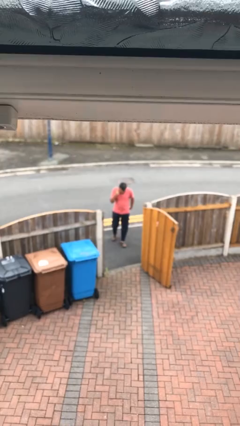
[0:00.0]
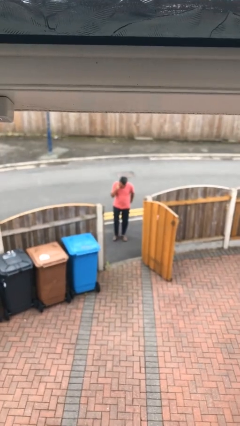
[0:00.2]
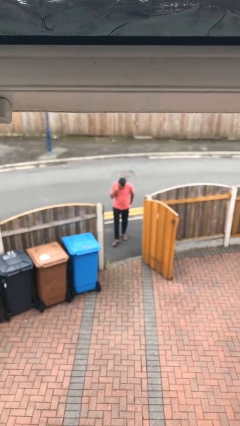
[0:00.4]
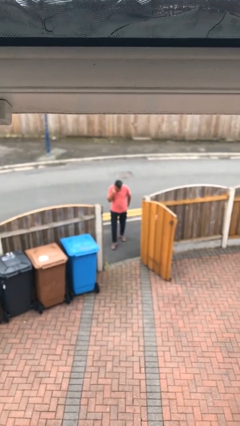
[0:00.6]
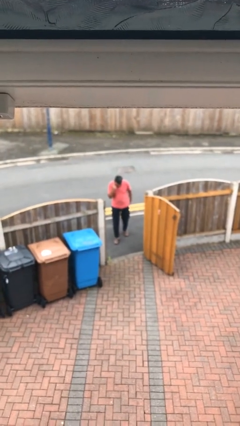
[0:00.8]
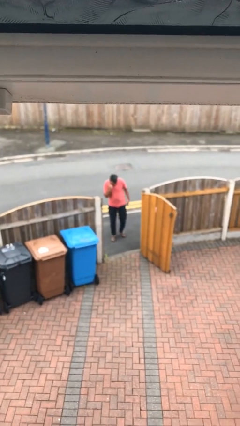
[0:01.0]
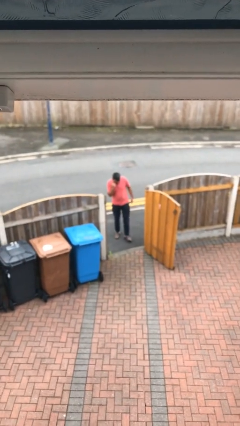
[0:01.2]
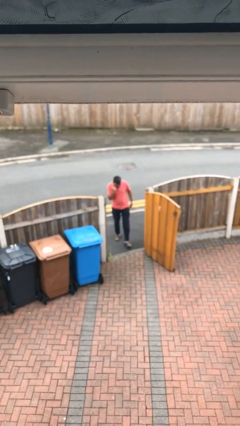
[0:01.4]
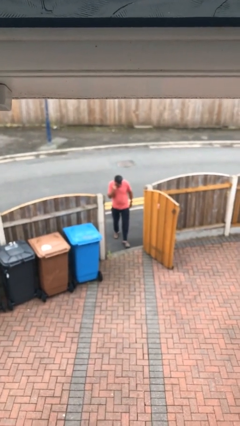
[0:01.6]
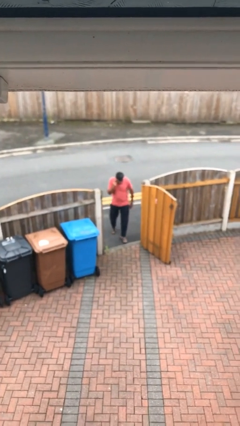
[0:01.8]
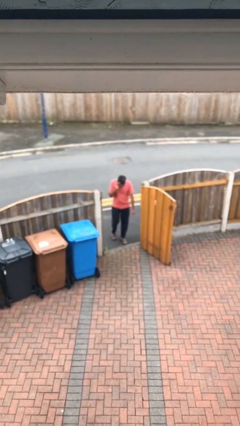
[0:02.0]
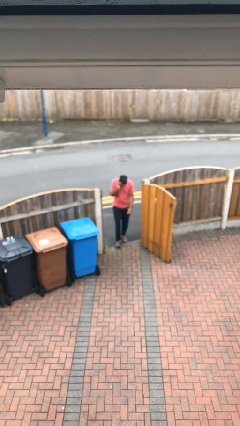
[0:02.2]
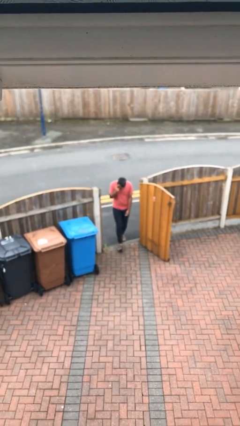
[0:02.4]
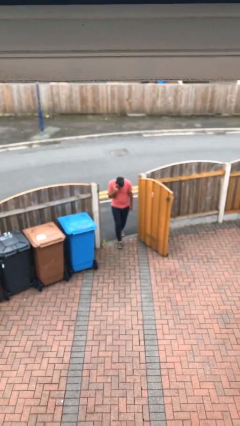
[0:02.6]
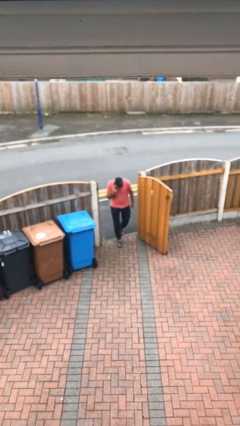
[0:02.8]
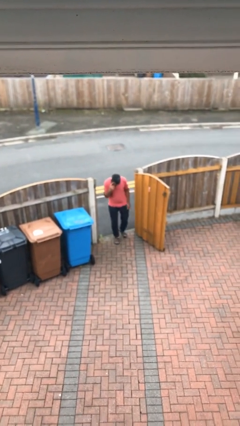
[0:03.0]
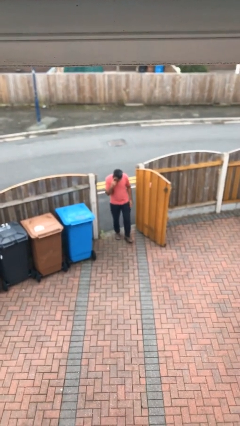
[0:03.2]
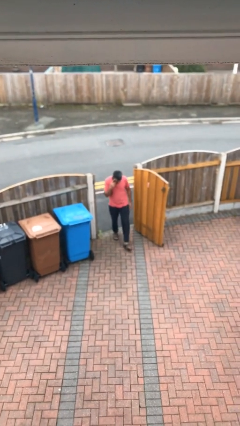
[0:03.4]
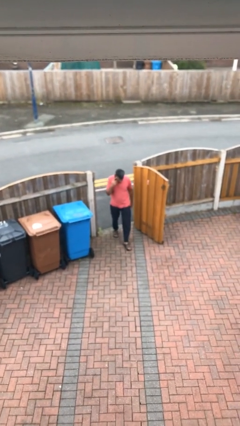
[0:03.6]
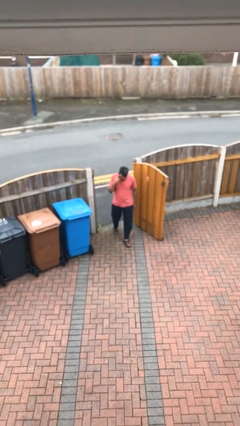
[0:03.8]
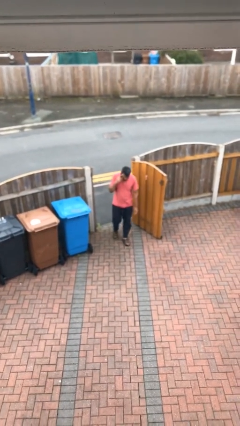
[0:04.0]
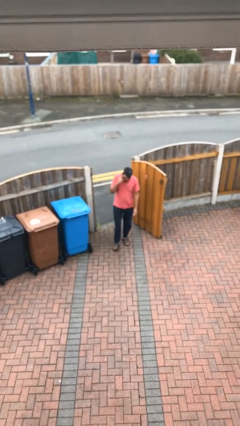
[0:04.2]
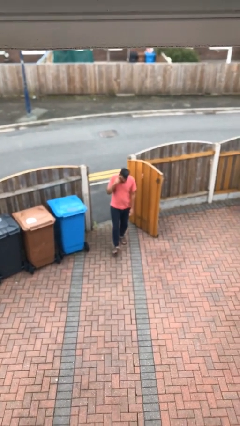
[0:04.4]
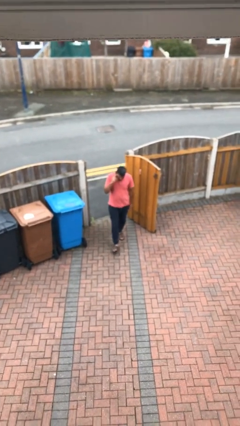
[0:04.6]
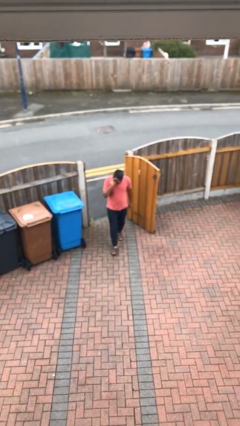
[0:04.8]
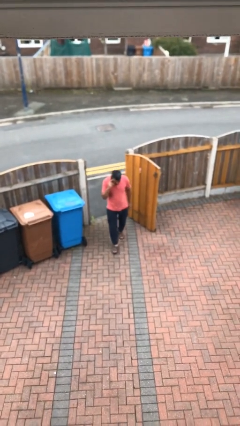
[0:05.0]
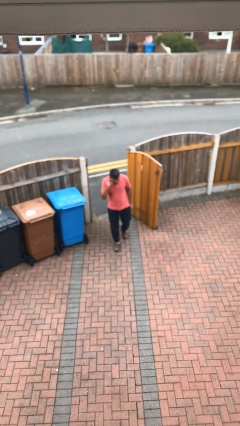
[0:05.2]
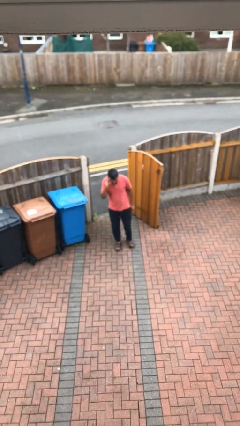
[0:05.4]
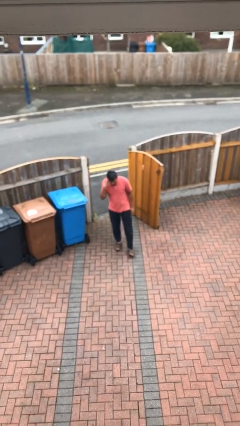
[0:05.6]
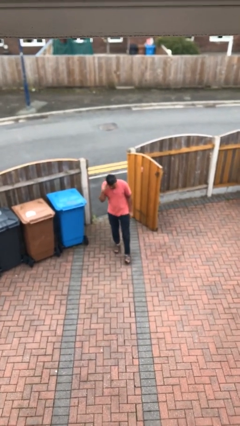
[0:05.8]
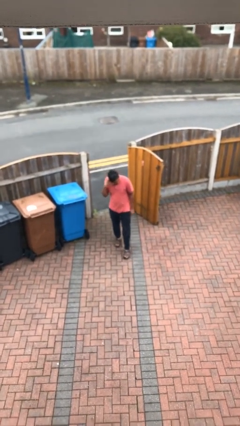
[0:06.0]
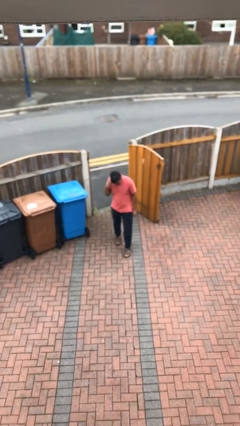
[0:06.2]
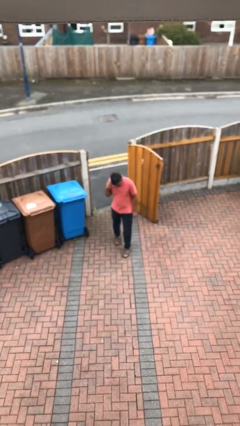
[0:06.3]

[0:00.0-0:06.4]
person enters scene through structure

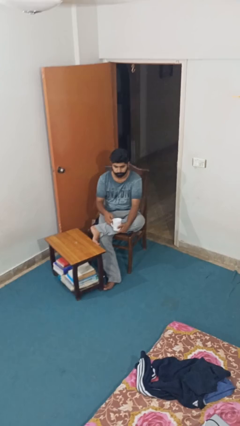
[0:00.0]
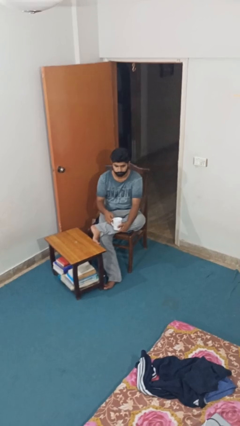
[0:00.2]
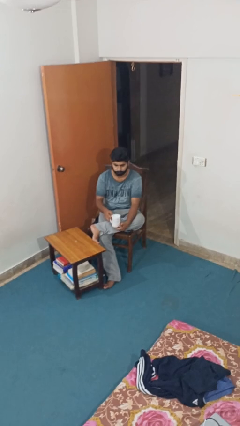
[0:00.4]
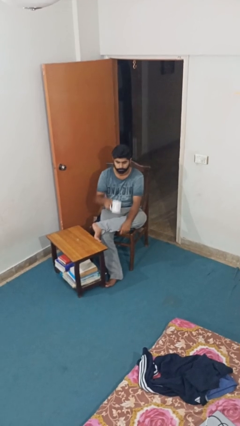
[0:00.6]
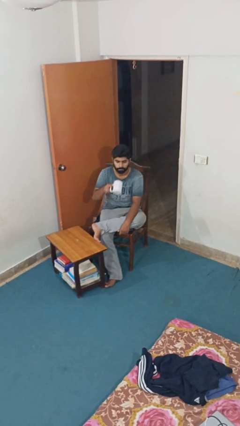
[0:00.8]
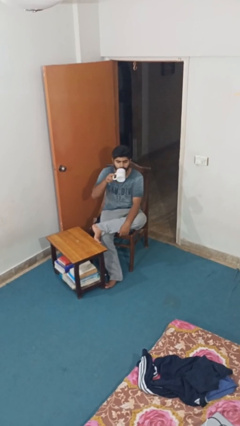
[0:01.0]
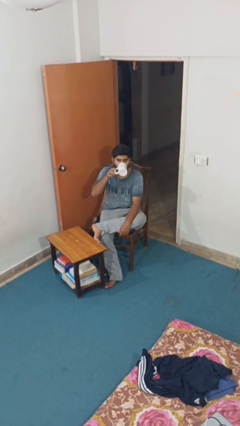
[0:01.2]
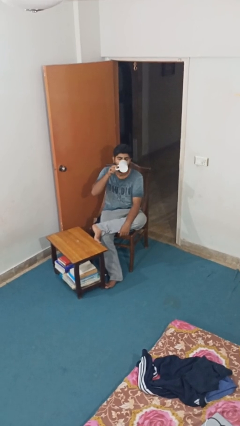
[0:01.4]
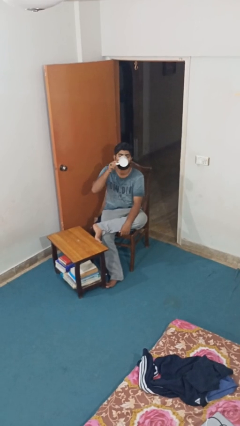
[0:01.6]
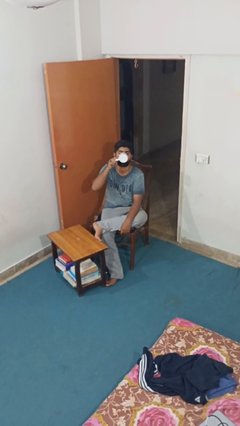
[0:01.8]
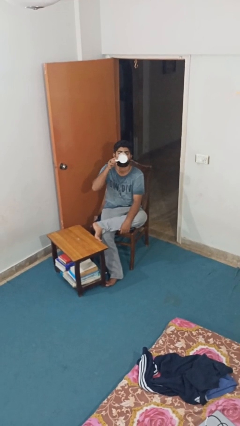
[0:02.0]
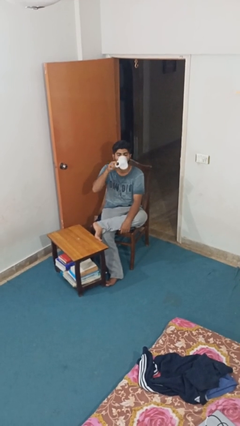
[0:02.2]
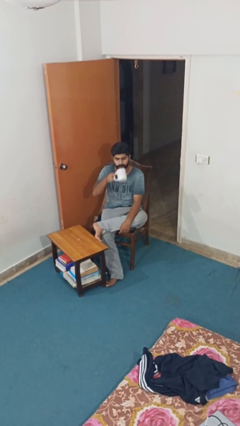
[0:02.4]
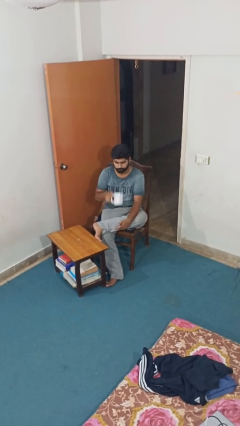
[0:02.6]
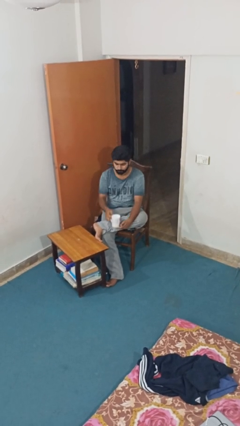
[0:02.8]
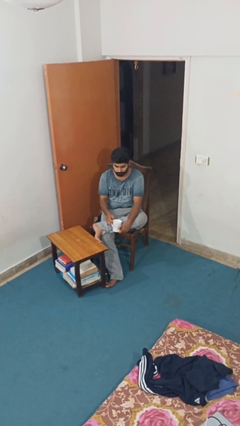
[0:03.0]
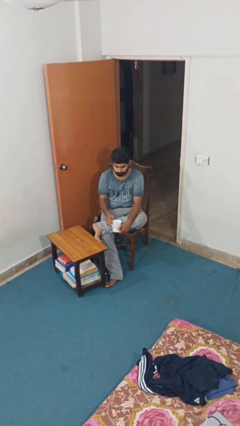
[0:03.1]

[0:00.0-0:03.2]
person drinks from mug

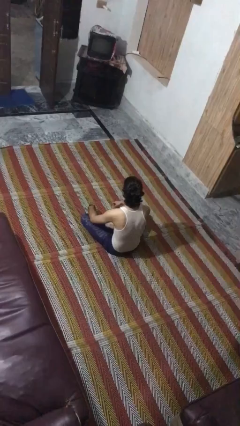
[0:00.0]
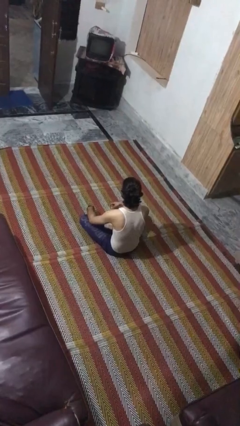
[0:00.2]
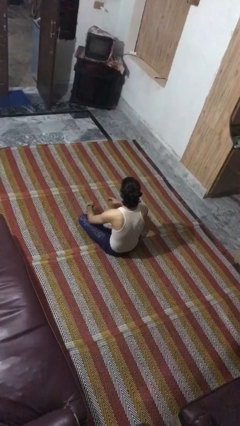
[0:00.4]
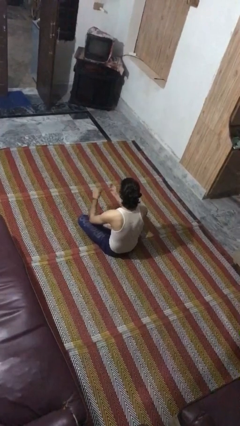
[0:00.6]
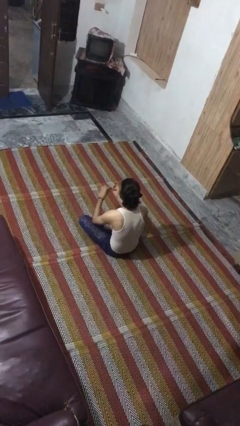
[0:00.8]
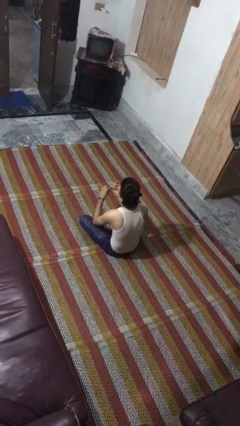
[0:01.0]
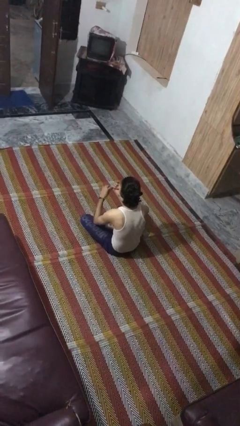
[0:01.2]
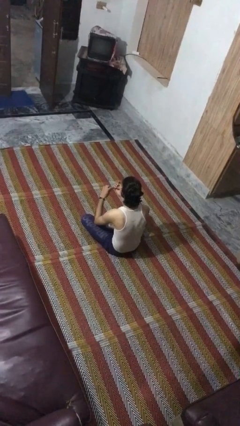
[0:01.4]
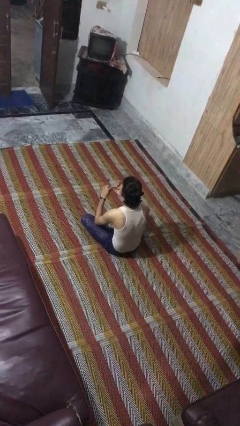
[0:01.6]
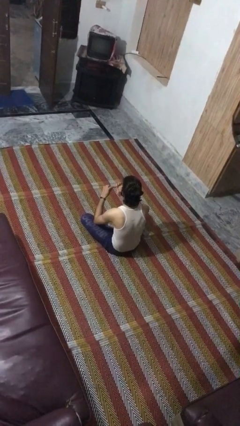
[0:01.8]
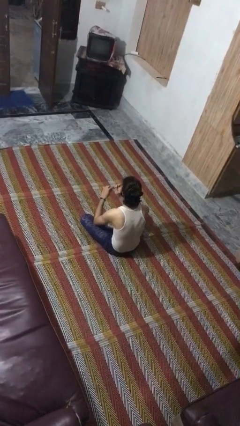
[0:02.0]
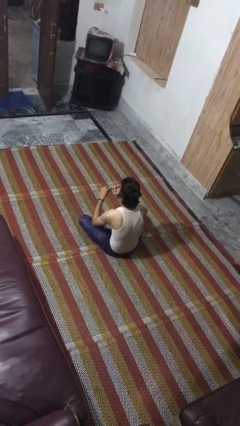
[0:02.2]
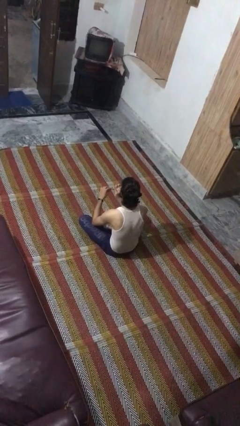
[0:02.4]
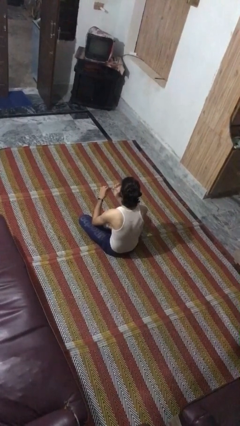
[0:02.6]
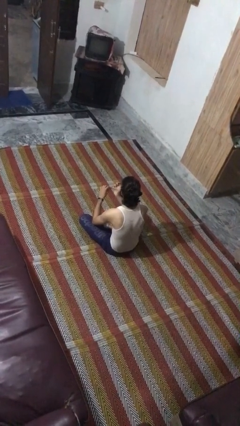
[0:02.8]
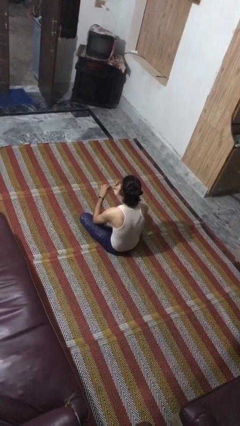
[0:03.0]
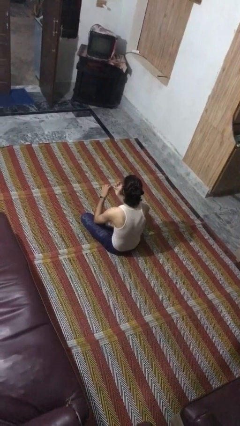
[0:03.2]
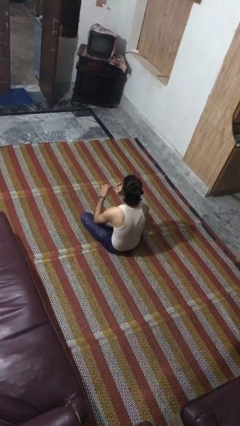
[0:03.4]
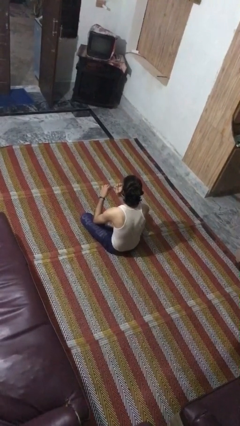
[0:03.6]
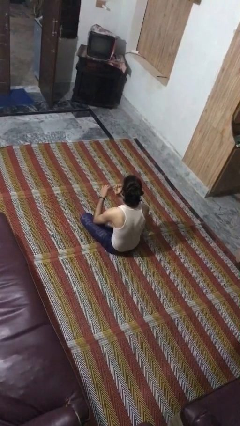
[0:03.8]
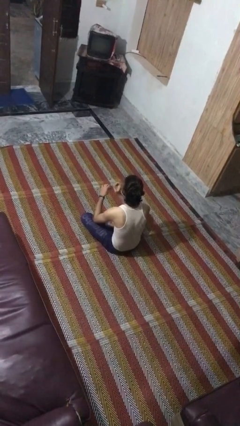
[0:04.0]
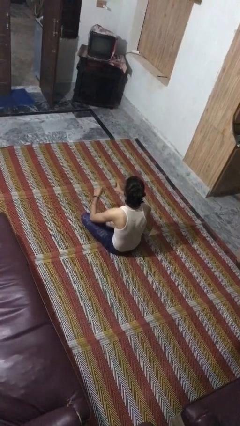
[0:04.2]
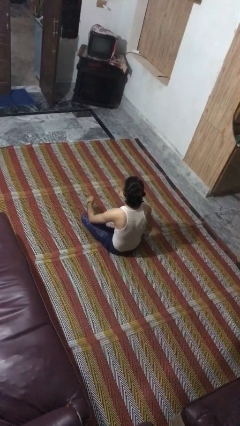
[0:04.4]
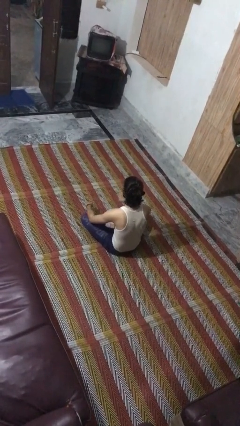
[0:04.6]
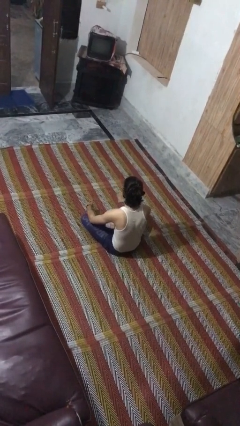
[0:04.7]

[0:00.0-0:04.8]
person files fingernails

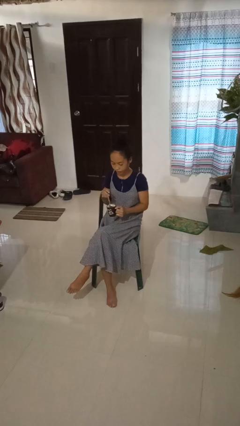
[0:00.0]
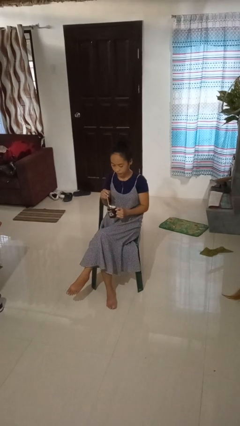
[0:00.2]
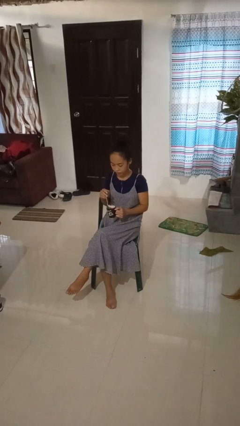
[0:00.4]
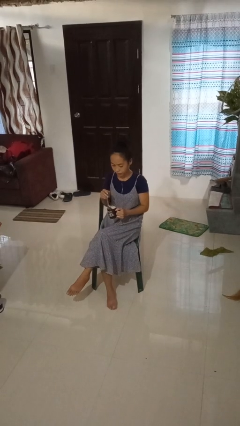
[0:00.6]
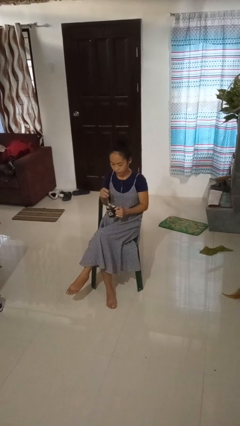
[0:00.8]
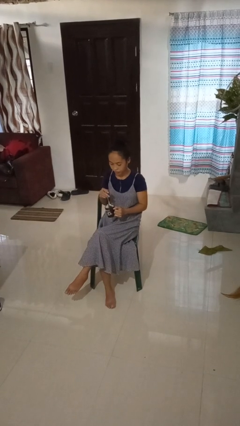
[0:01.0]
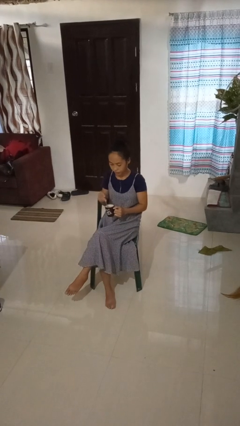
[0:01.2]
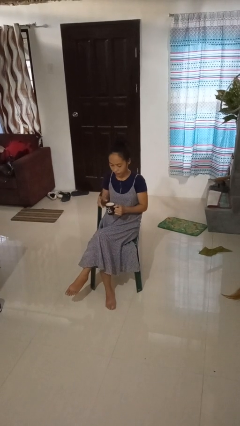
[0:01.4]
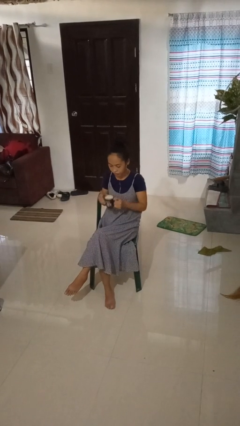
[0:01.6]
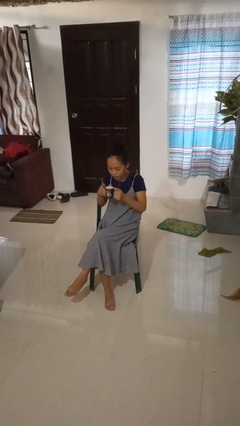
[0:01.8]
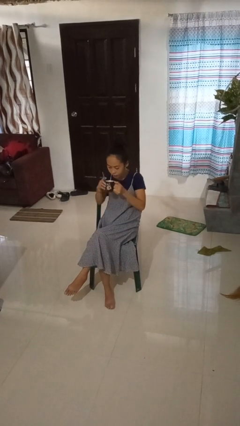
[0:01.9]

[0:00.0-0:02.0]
person stirs mug

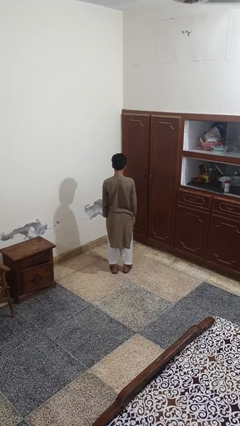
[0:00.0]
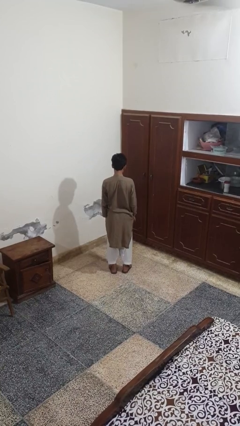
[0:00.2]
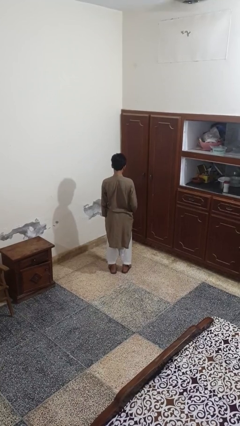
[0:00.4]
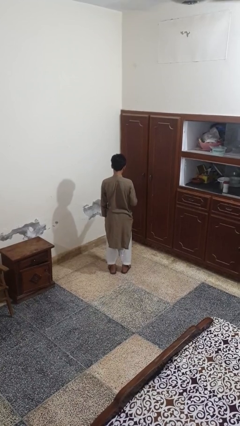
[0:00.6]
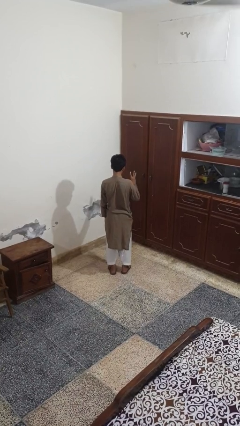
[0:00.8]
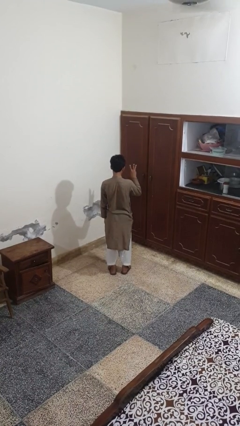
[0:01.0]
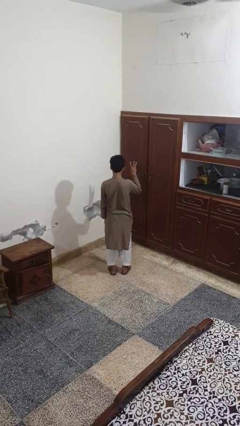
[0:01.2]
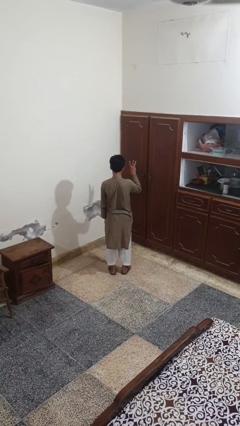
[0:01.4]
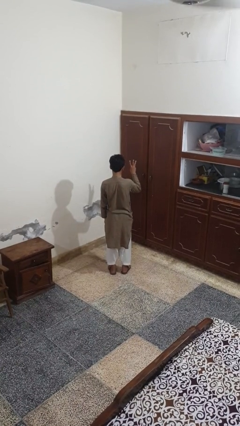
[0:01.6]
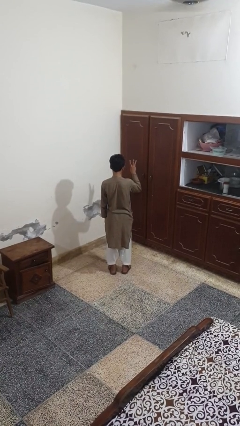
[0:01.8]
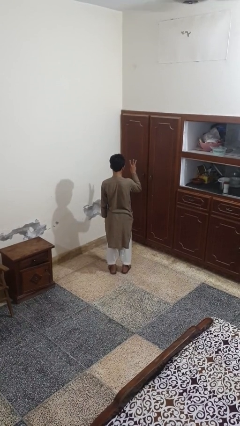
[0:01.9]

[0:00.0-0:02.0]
person gestures number three
